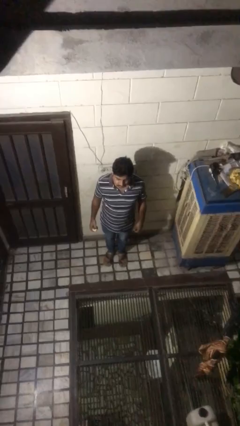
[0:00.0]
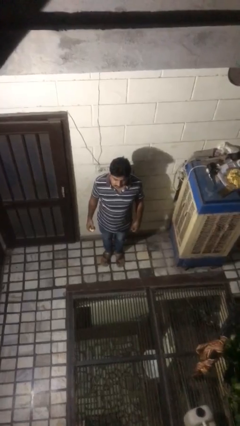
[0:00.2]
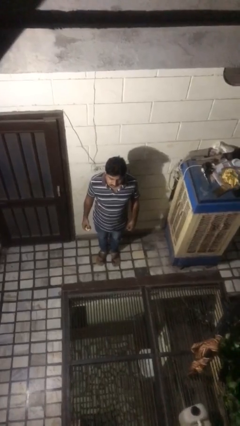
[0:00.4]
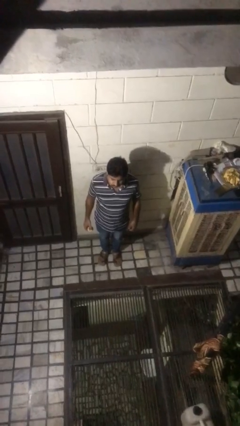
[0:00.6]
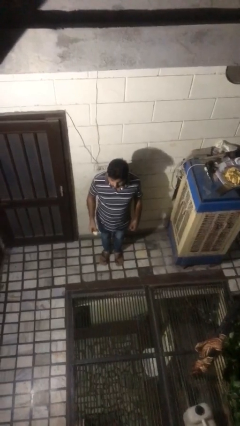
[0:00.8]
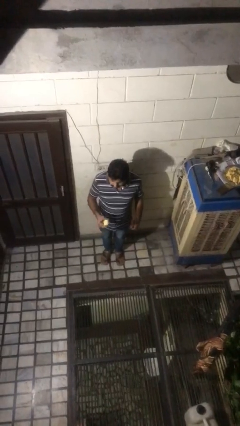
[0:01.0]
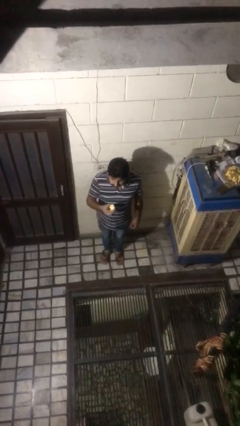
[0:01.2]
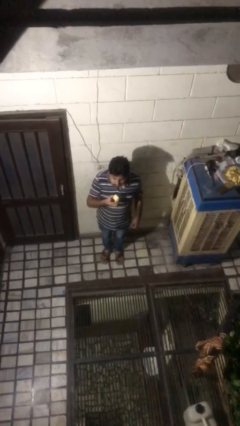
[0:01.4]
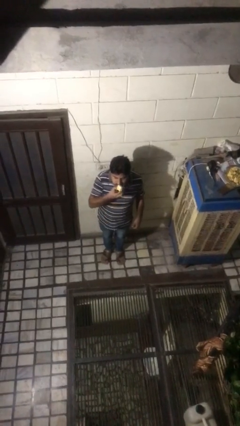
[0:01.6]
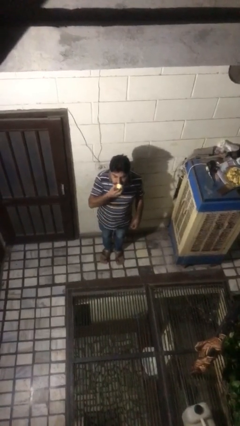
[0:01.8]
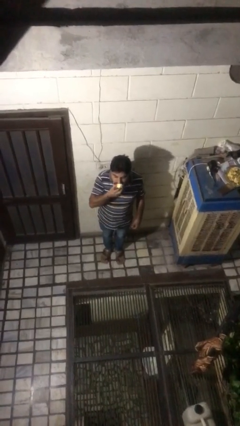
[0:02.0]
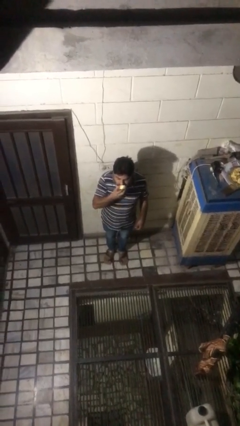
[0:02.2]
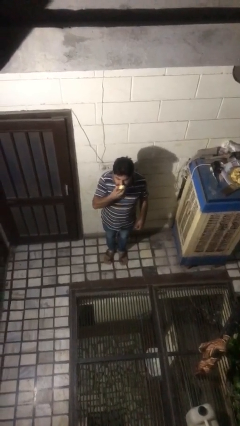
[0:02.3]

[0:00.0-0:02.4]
person eats apple

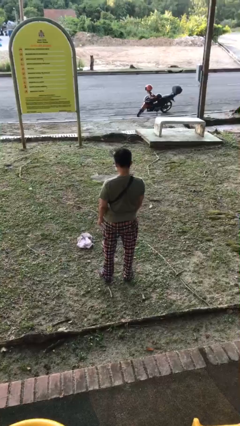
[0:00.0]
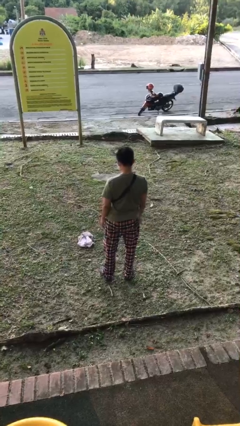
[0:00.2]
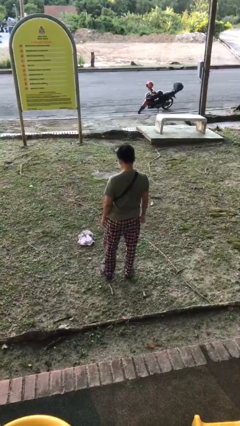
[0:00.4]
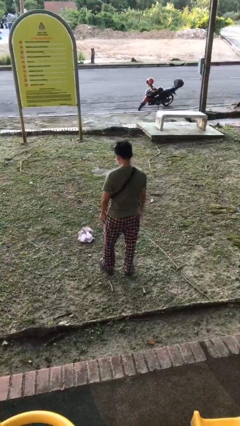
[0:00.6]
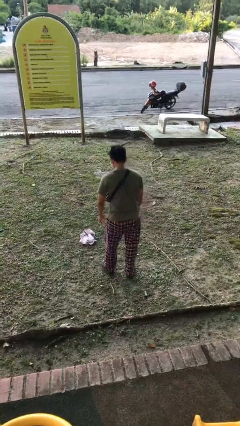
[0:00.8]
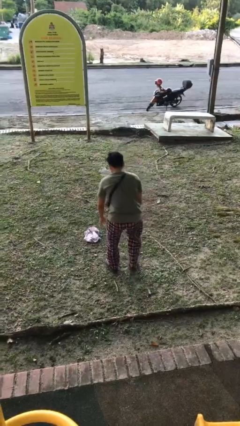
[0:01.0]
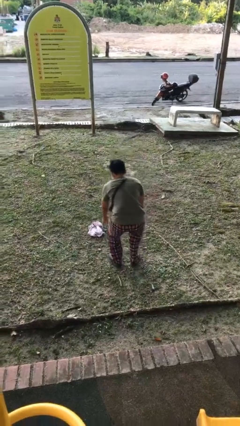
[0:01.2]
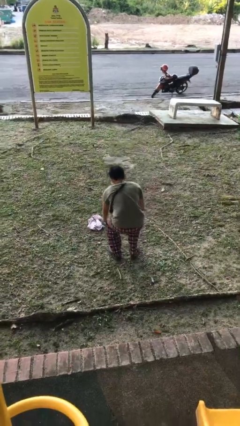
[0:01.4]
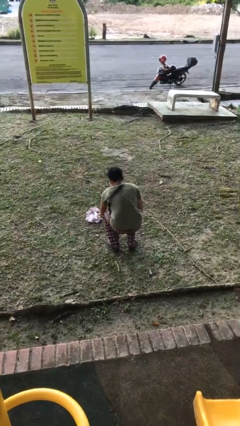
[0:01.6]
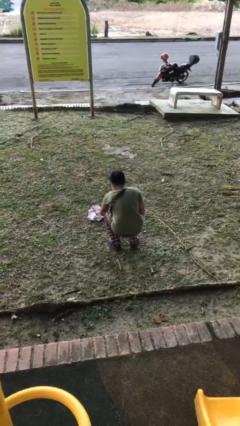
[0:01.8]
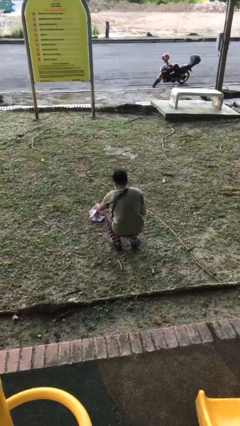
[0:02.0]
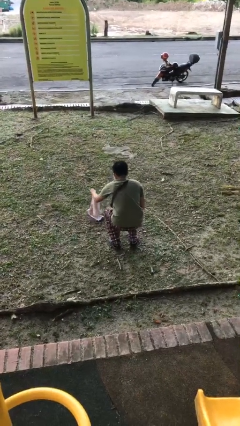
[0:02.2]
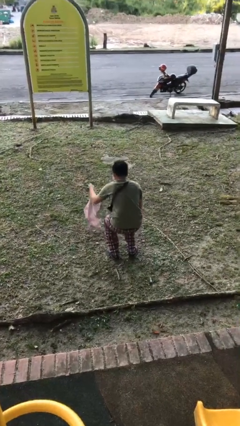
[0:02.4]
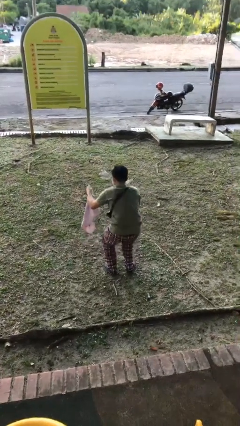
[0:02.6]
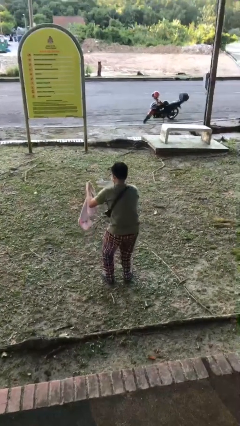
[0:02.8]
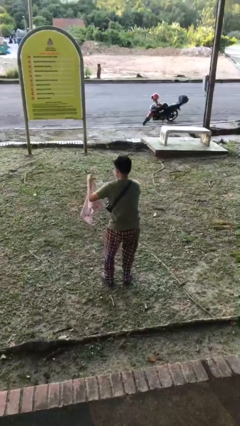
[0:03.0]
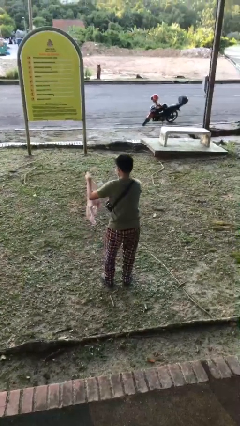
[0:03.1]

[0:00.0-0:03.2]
person picks up object from floor

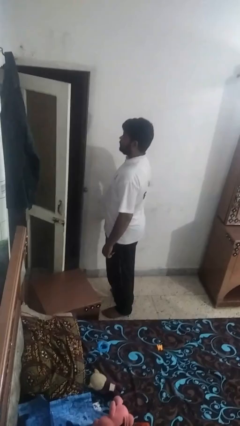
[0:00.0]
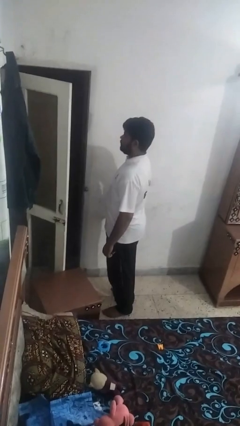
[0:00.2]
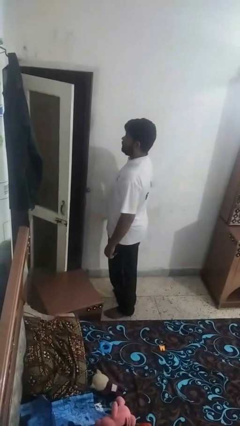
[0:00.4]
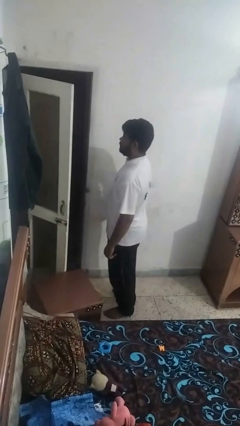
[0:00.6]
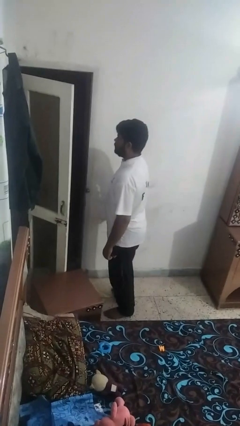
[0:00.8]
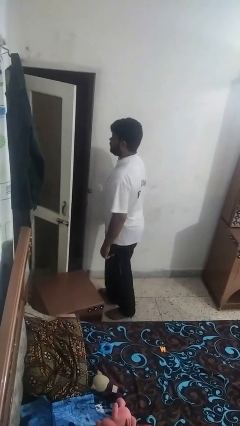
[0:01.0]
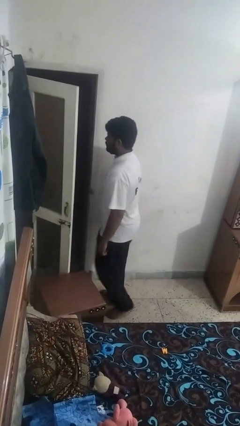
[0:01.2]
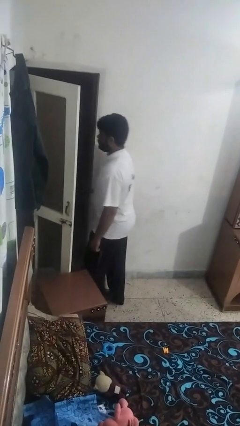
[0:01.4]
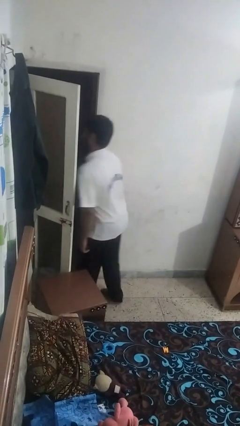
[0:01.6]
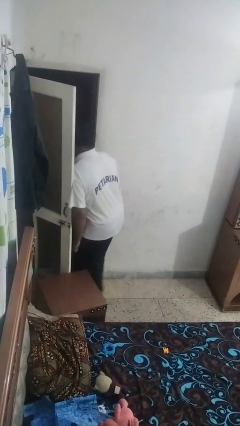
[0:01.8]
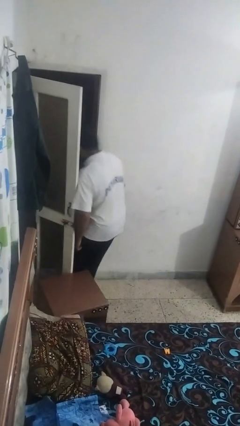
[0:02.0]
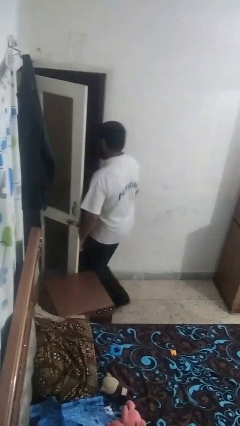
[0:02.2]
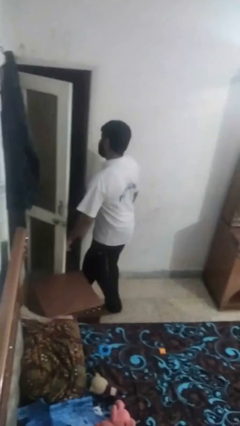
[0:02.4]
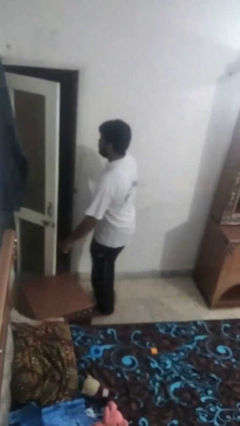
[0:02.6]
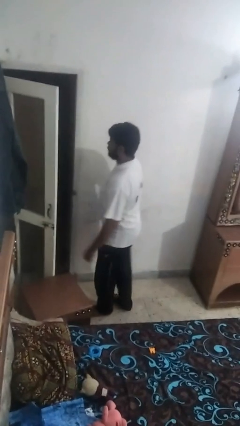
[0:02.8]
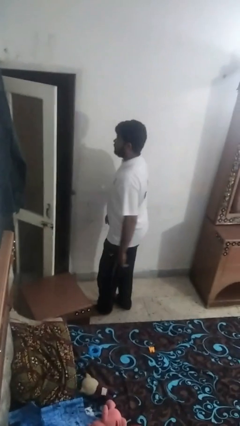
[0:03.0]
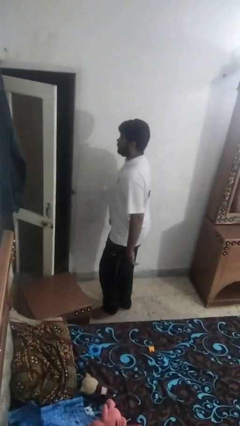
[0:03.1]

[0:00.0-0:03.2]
person bumps into wall

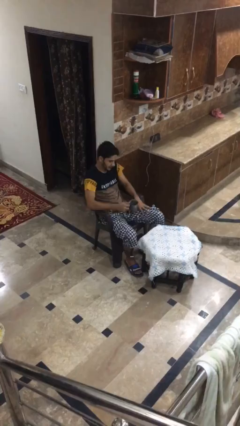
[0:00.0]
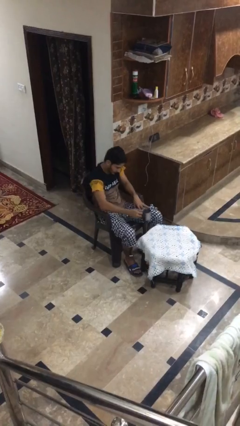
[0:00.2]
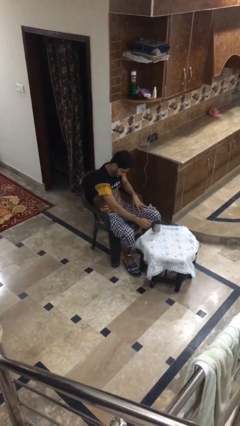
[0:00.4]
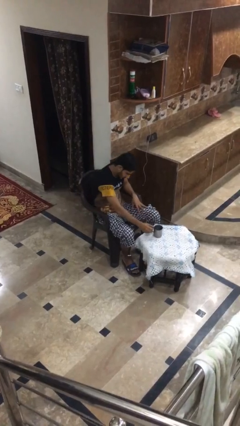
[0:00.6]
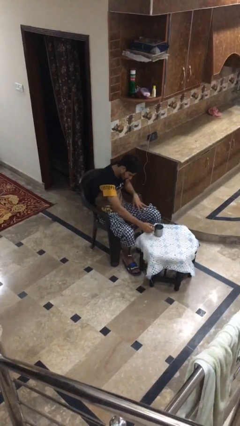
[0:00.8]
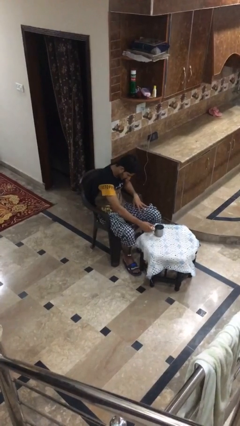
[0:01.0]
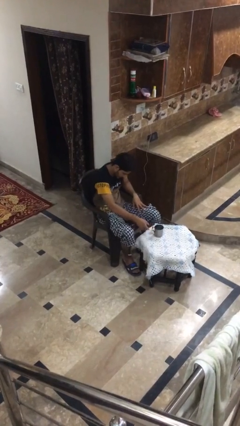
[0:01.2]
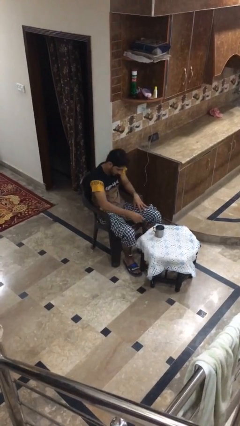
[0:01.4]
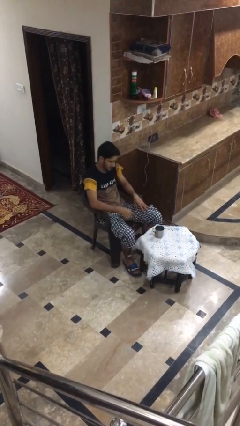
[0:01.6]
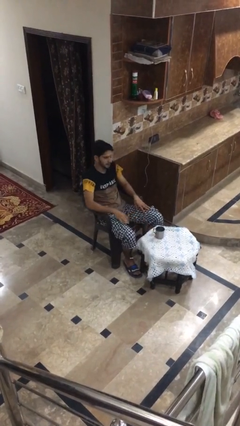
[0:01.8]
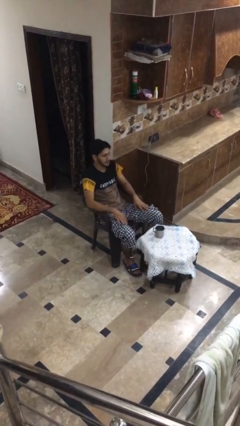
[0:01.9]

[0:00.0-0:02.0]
person puts down object on table

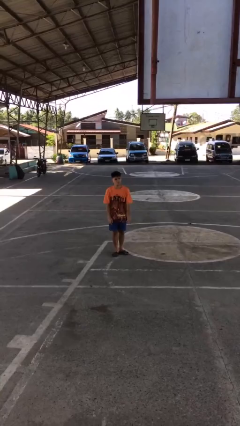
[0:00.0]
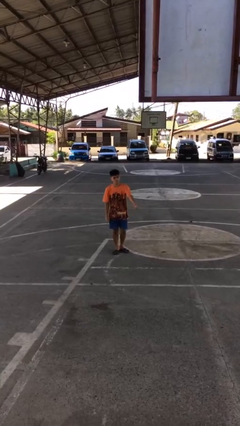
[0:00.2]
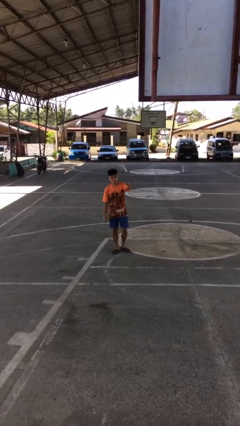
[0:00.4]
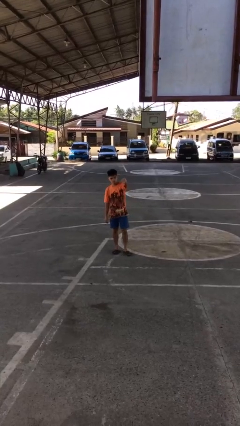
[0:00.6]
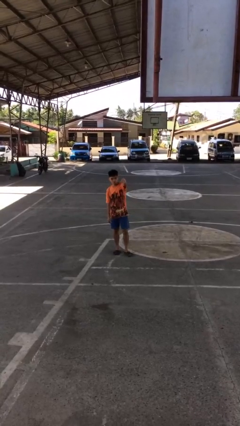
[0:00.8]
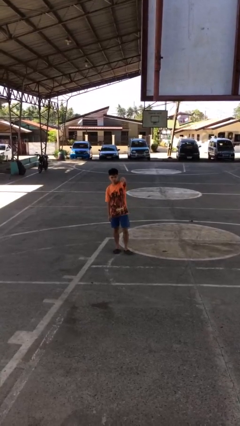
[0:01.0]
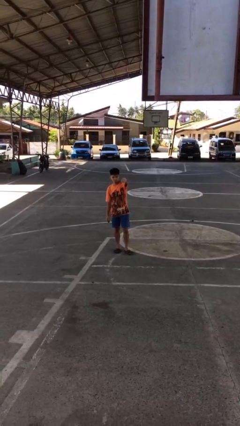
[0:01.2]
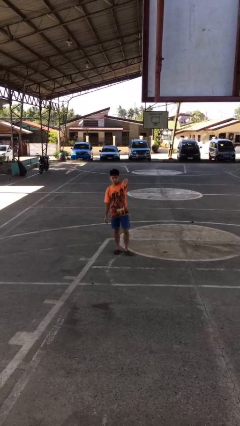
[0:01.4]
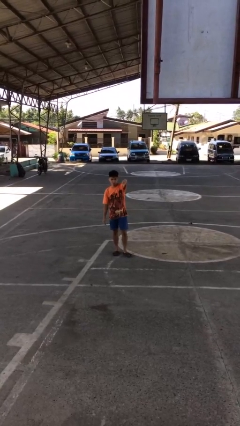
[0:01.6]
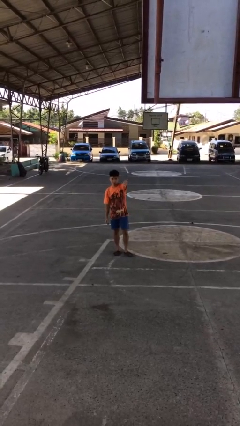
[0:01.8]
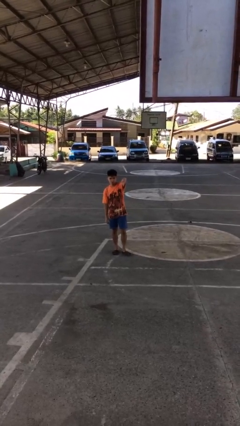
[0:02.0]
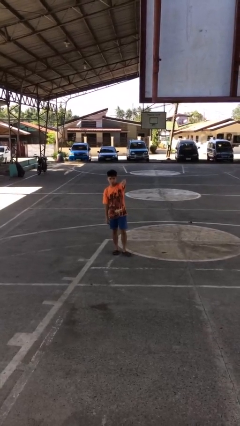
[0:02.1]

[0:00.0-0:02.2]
person gestures thumbs down

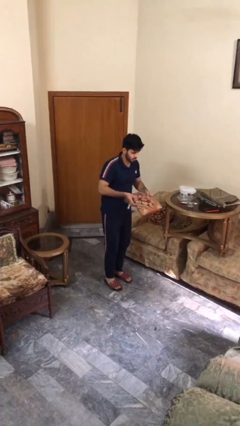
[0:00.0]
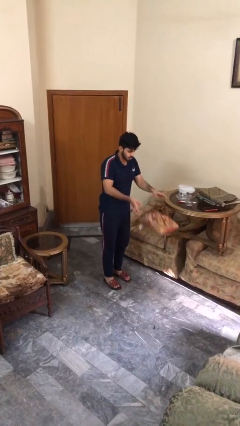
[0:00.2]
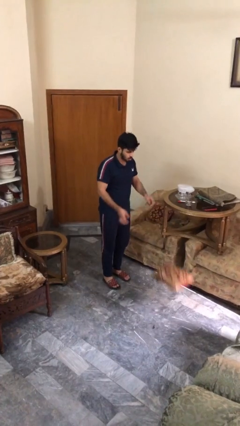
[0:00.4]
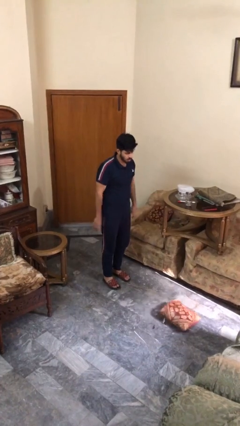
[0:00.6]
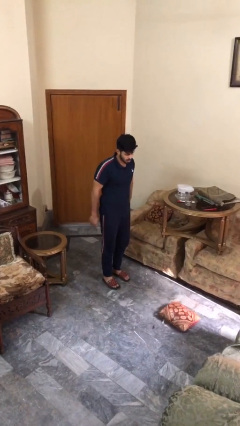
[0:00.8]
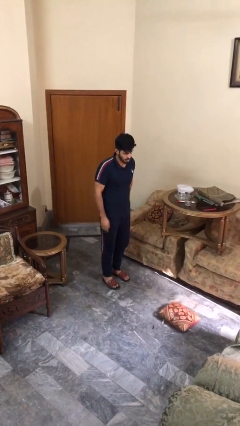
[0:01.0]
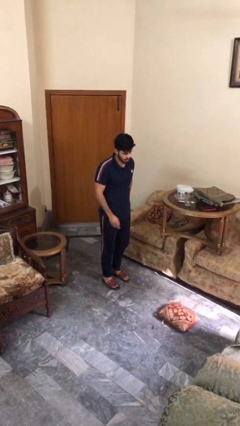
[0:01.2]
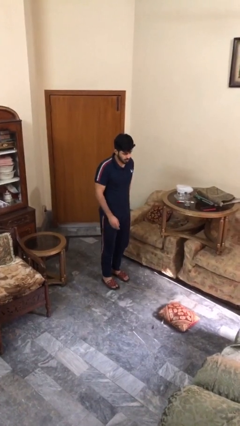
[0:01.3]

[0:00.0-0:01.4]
person throws object to ground

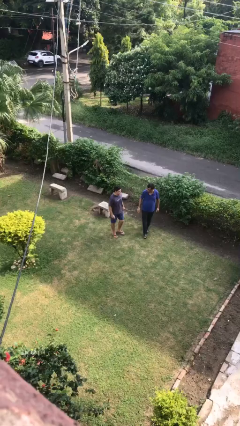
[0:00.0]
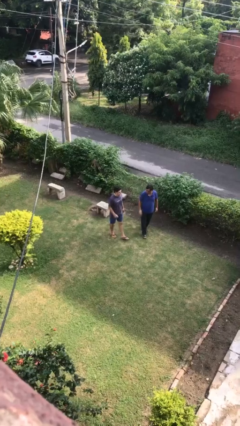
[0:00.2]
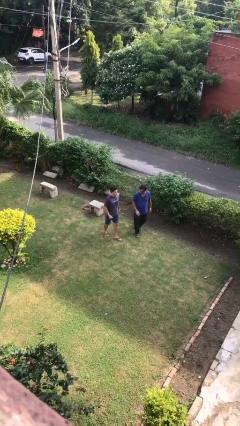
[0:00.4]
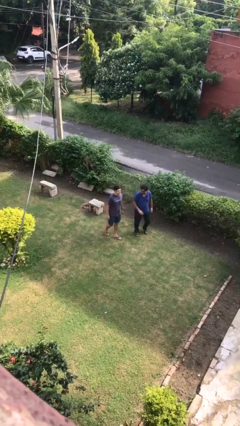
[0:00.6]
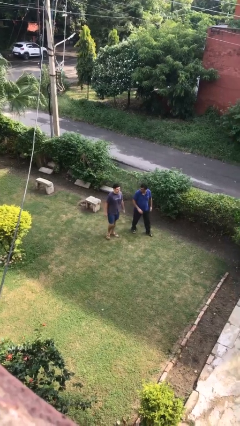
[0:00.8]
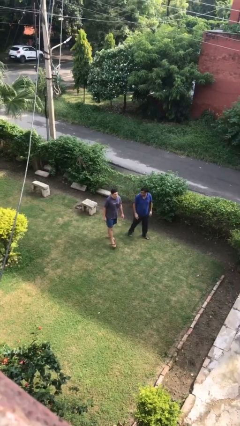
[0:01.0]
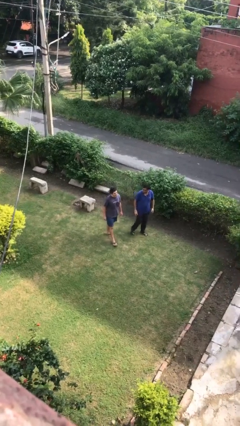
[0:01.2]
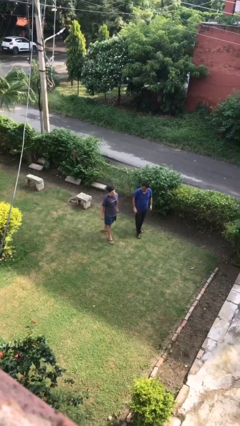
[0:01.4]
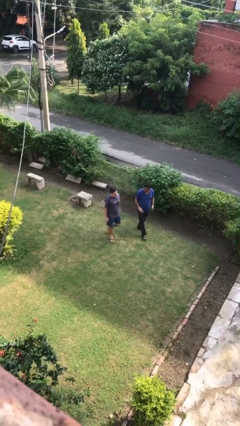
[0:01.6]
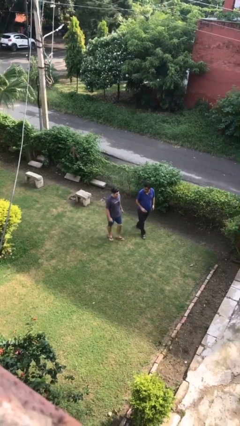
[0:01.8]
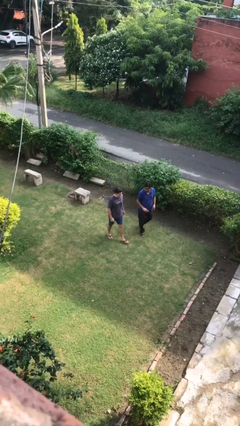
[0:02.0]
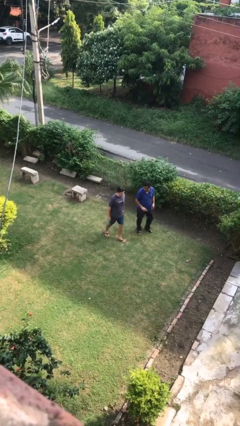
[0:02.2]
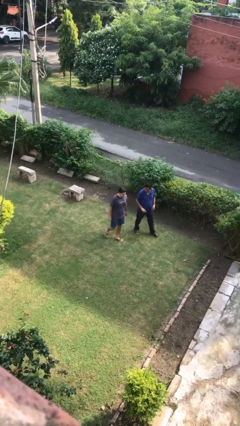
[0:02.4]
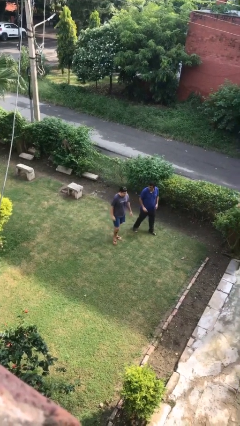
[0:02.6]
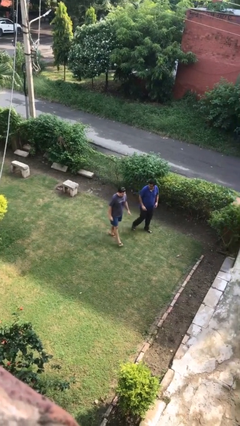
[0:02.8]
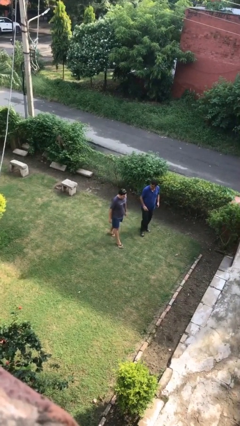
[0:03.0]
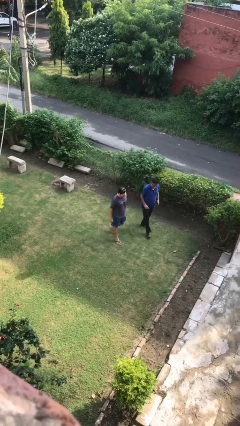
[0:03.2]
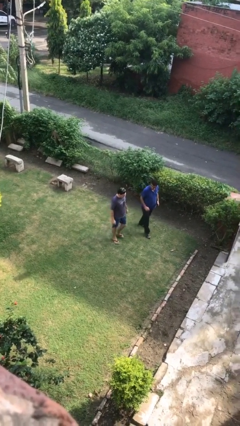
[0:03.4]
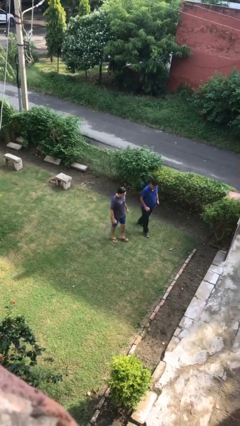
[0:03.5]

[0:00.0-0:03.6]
person talks to person
